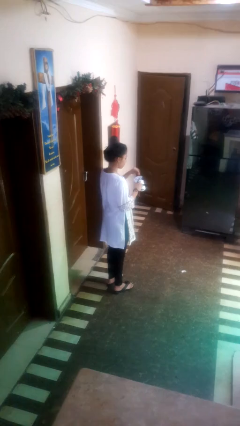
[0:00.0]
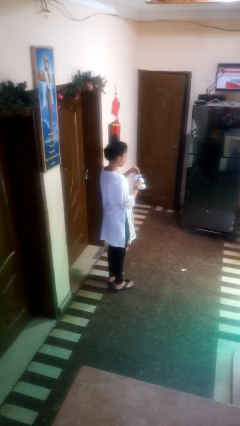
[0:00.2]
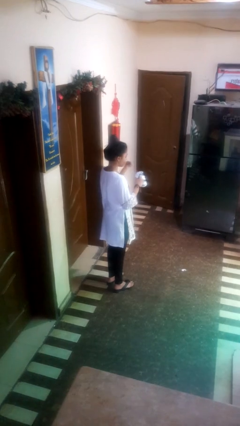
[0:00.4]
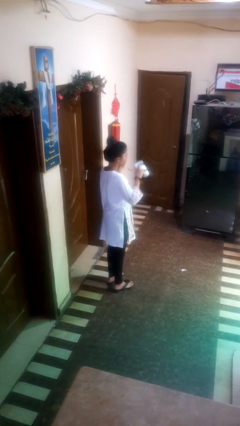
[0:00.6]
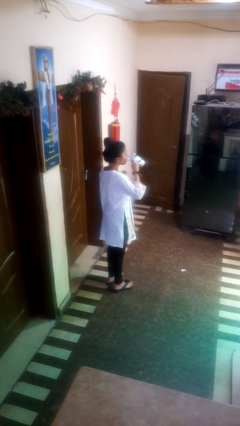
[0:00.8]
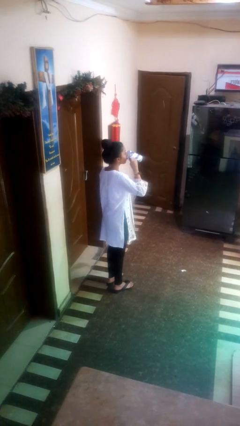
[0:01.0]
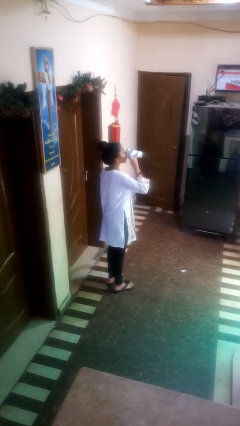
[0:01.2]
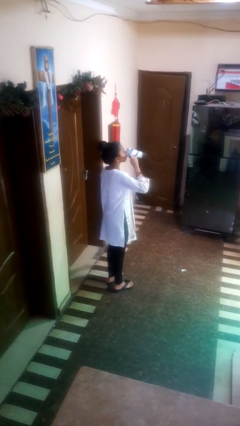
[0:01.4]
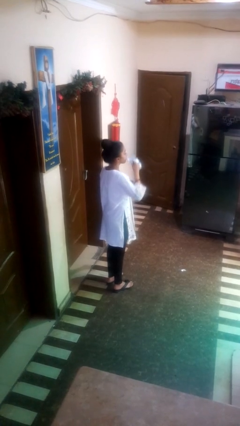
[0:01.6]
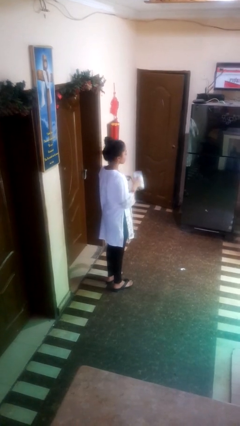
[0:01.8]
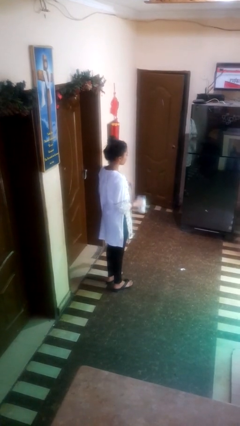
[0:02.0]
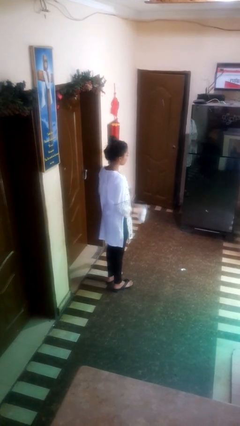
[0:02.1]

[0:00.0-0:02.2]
person drinks from mug

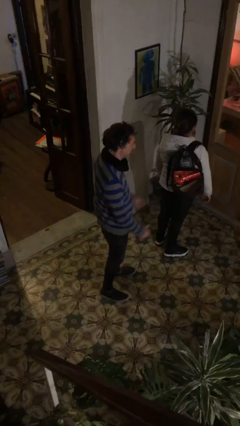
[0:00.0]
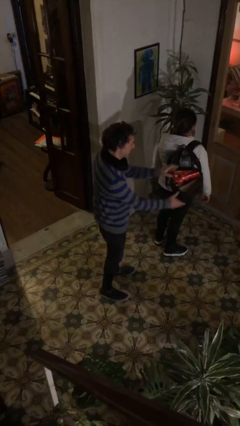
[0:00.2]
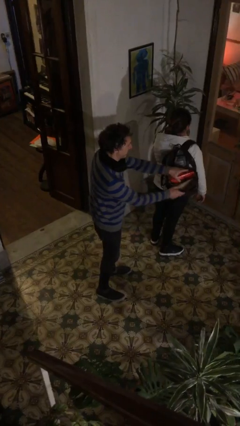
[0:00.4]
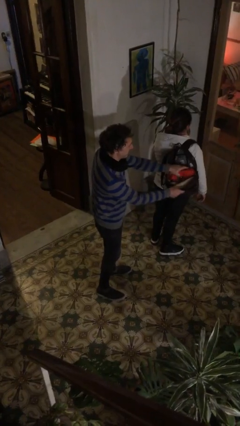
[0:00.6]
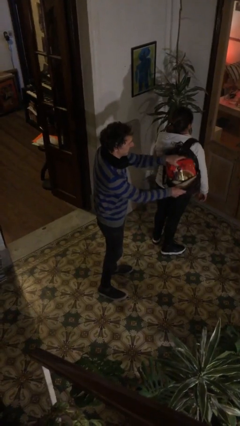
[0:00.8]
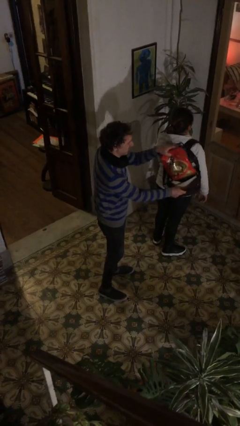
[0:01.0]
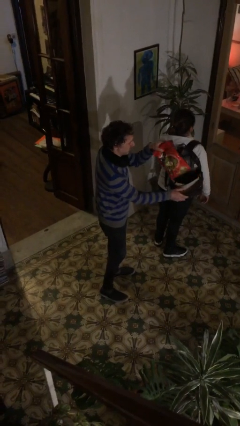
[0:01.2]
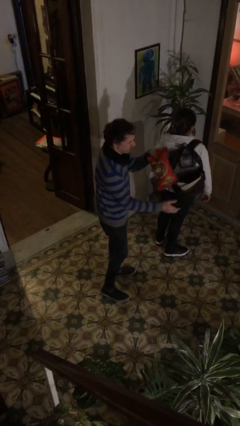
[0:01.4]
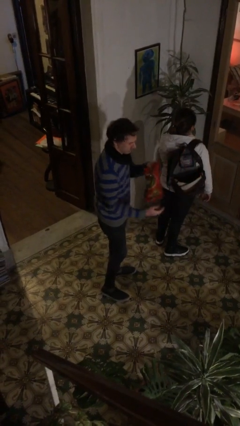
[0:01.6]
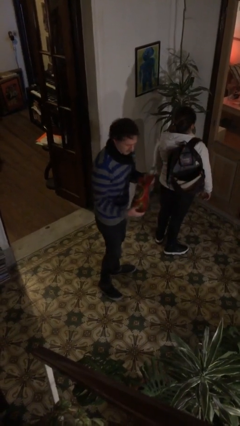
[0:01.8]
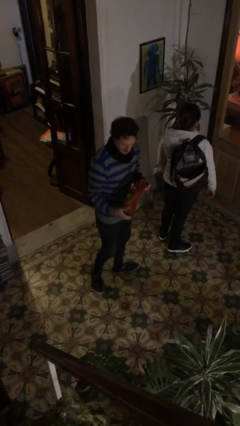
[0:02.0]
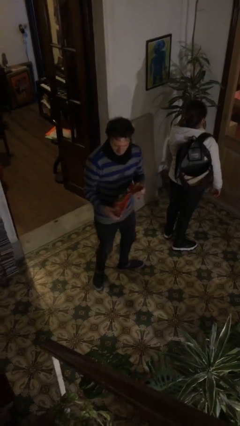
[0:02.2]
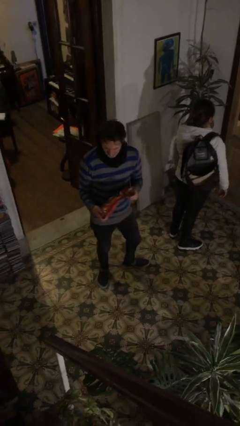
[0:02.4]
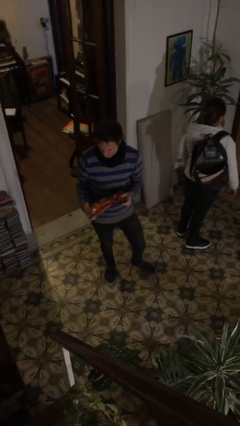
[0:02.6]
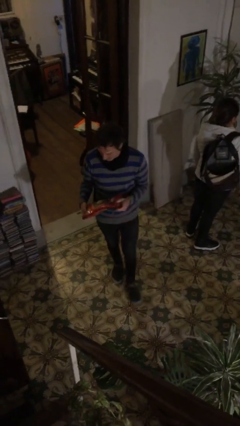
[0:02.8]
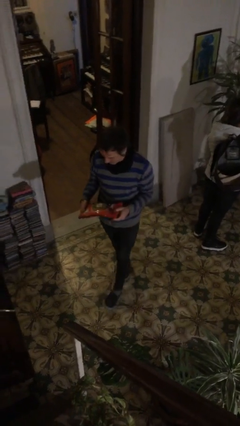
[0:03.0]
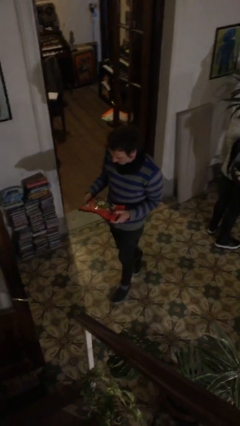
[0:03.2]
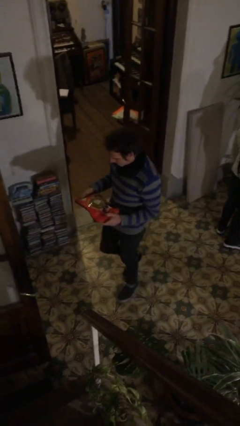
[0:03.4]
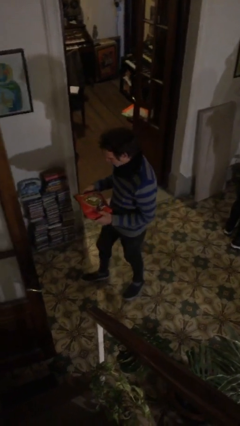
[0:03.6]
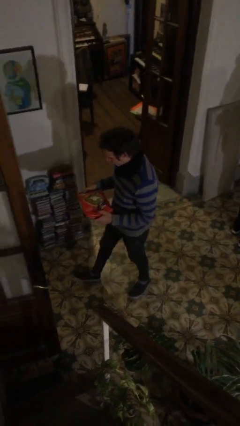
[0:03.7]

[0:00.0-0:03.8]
person steals object from person

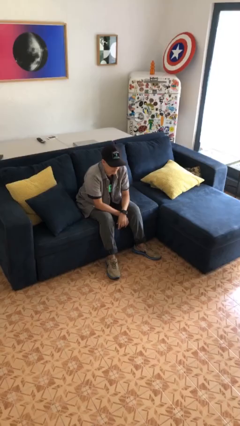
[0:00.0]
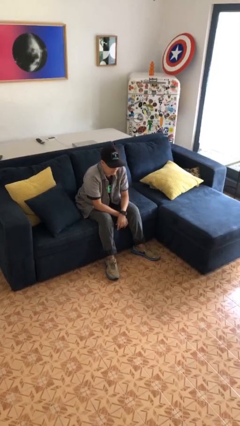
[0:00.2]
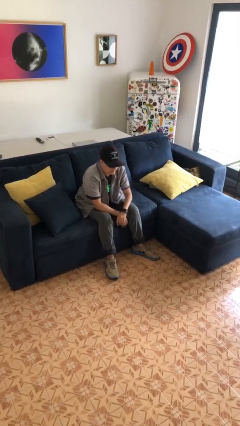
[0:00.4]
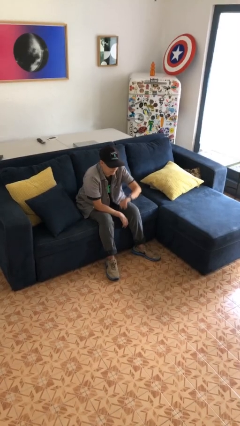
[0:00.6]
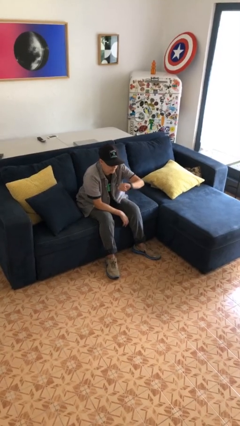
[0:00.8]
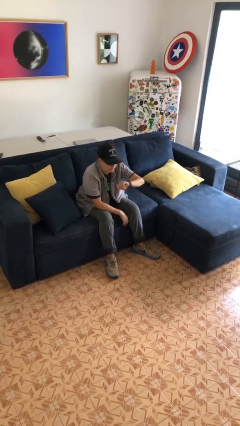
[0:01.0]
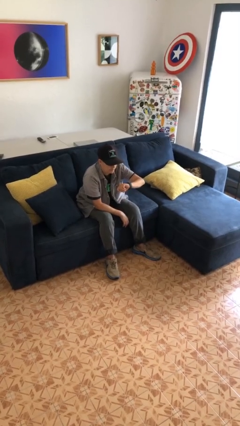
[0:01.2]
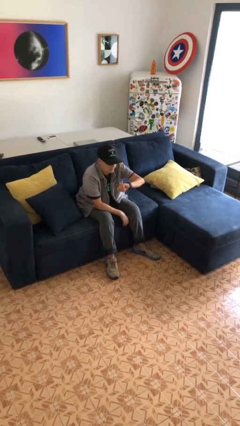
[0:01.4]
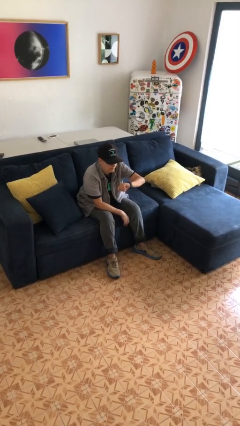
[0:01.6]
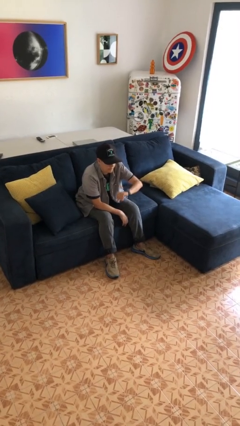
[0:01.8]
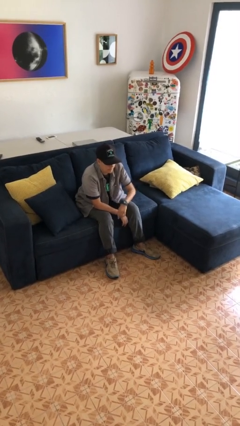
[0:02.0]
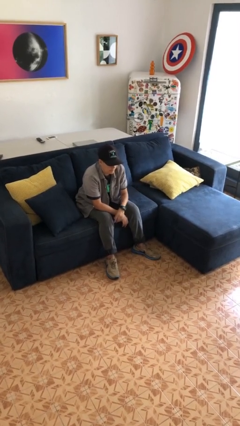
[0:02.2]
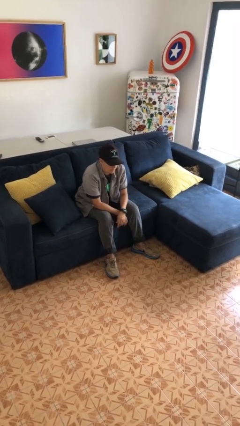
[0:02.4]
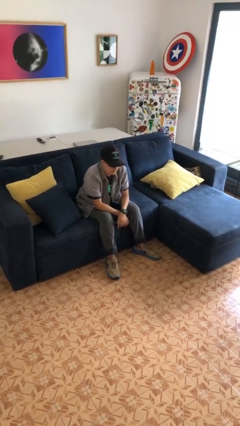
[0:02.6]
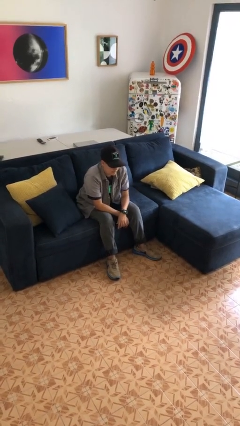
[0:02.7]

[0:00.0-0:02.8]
person looks at wristwatch

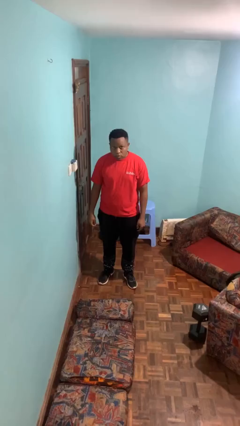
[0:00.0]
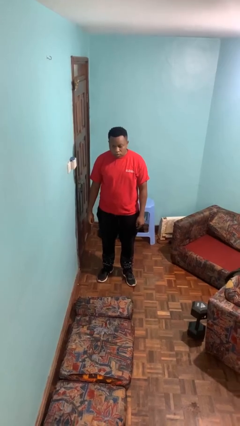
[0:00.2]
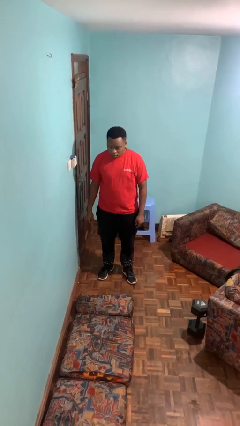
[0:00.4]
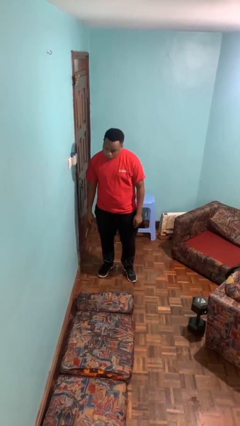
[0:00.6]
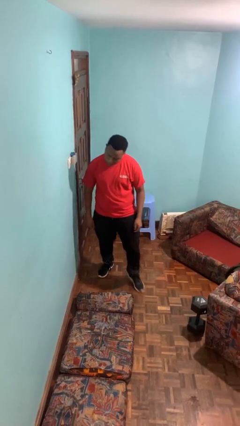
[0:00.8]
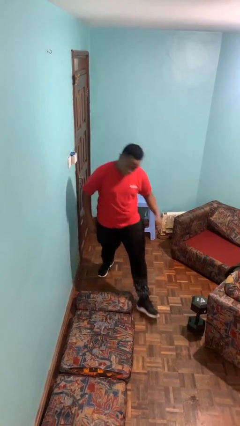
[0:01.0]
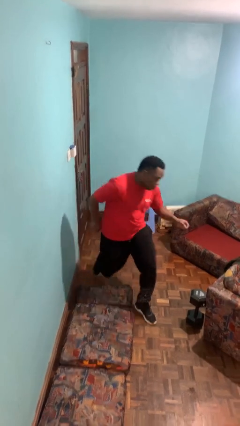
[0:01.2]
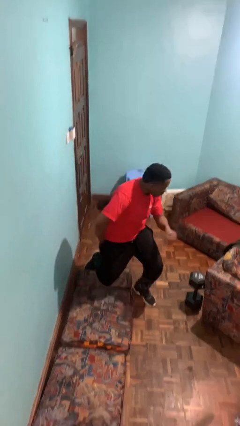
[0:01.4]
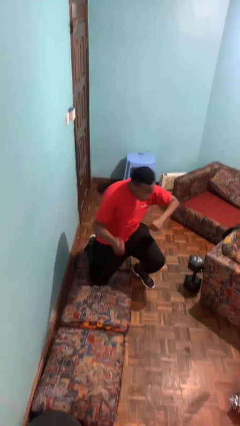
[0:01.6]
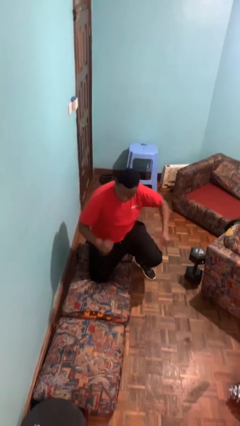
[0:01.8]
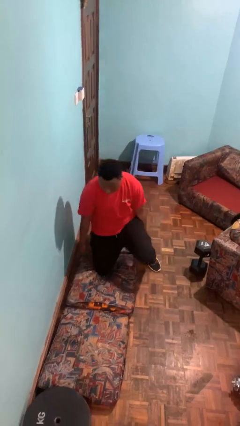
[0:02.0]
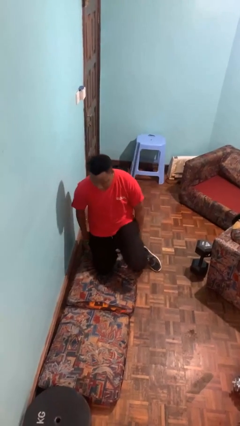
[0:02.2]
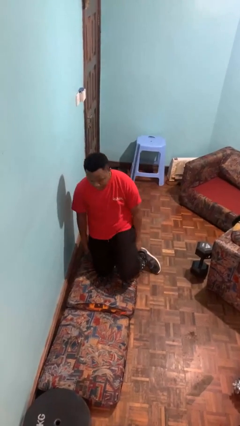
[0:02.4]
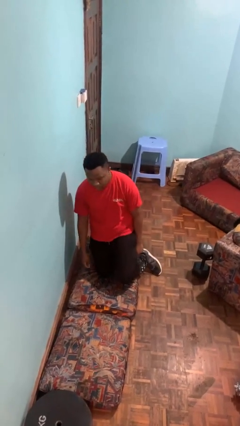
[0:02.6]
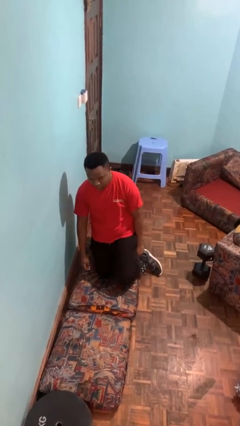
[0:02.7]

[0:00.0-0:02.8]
person trips on object on floor

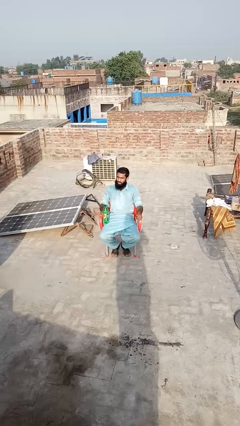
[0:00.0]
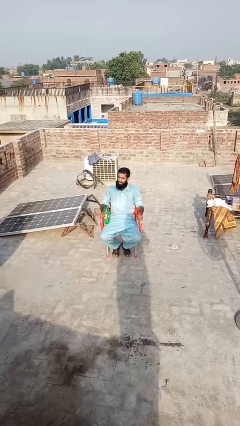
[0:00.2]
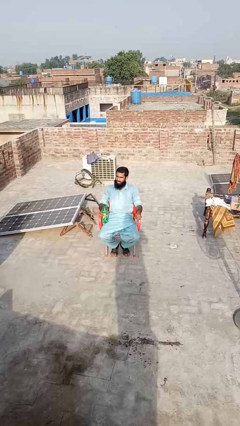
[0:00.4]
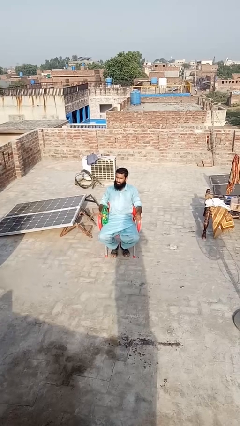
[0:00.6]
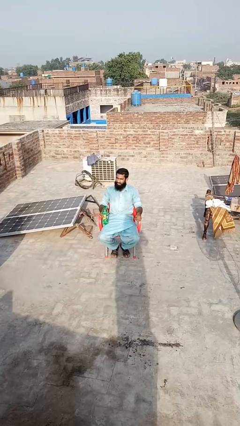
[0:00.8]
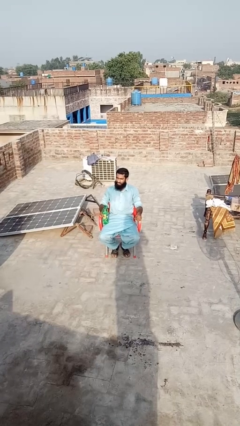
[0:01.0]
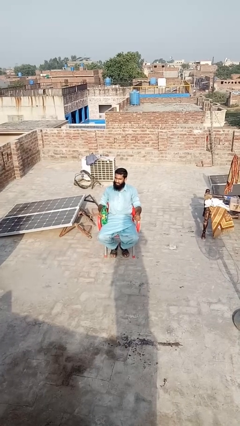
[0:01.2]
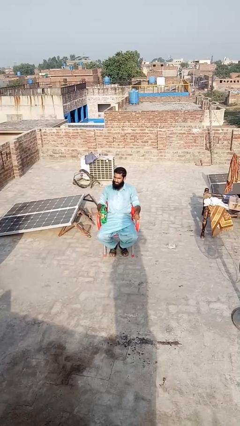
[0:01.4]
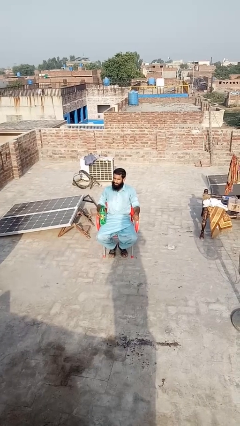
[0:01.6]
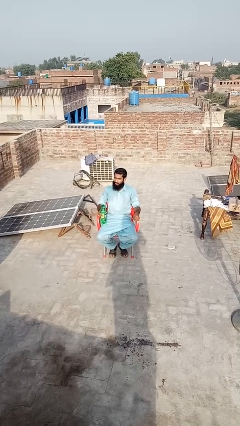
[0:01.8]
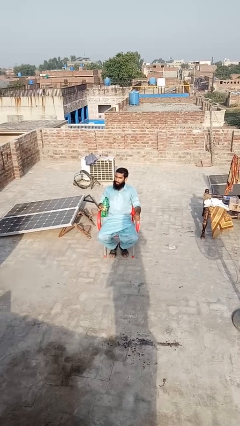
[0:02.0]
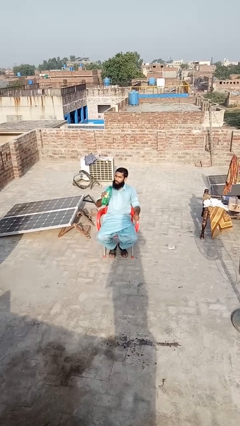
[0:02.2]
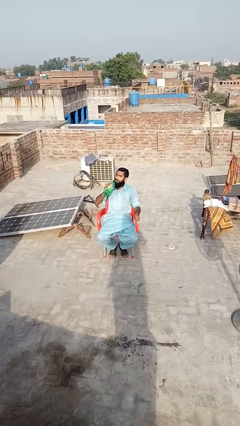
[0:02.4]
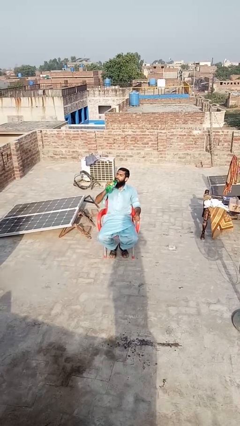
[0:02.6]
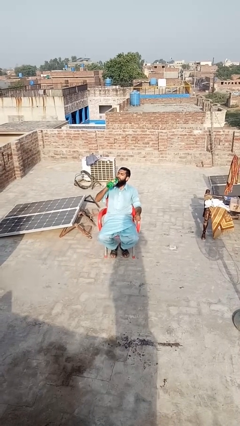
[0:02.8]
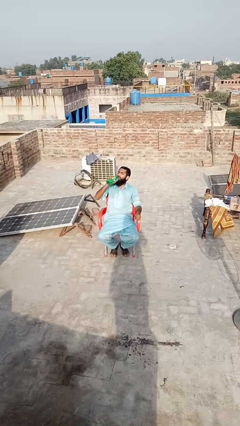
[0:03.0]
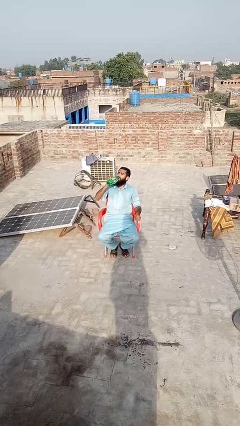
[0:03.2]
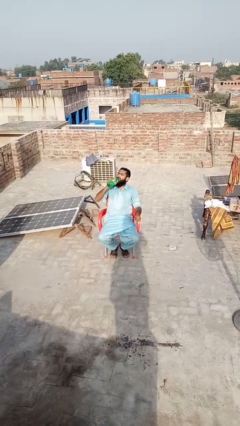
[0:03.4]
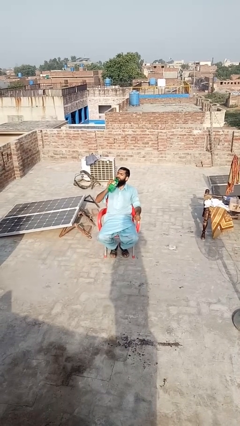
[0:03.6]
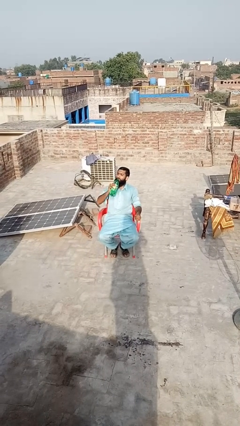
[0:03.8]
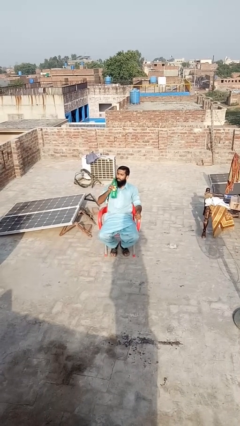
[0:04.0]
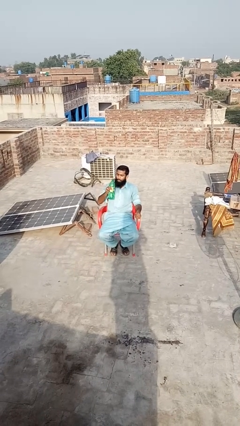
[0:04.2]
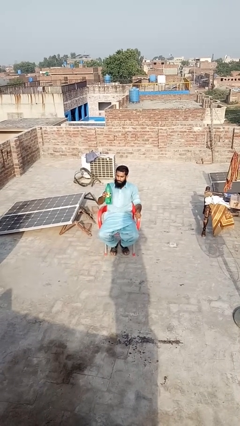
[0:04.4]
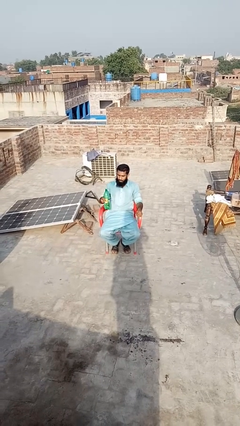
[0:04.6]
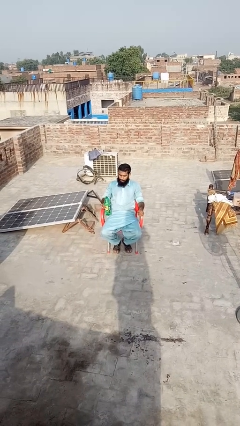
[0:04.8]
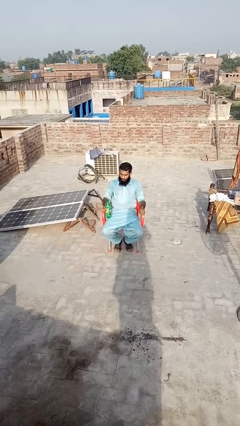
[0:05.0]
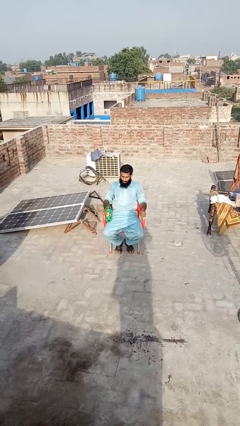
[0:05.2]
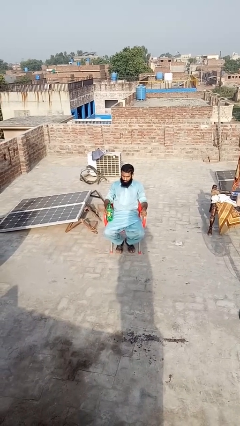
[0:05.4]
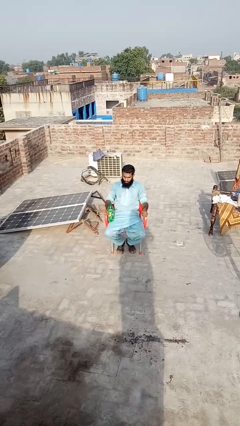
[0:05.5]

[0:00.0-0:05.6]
person drinks from bottle

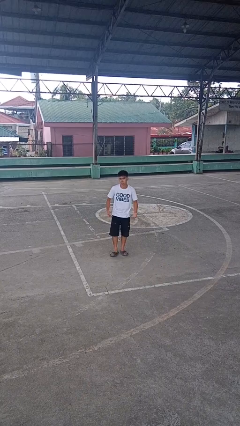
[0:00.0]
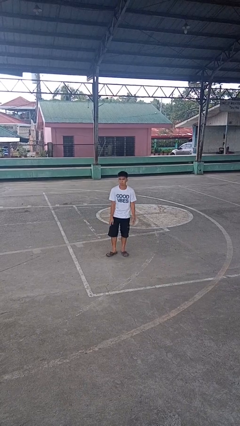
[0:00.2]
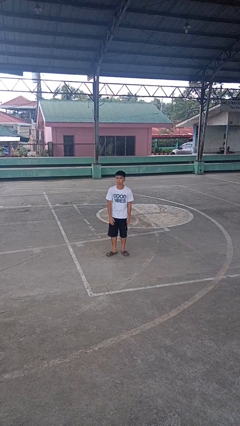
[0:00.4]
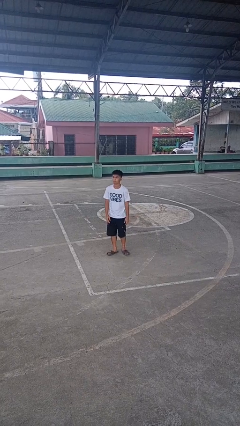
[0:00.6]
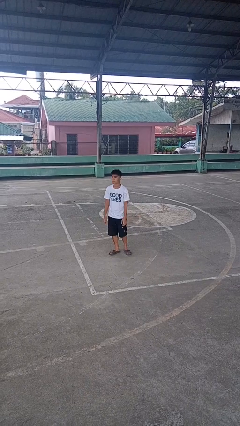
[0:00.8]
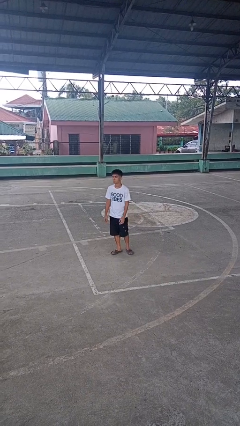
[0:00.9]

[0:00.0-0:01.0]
person shrugs
